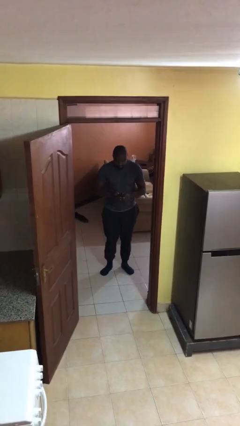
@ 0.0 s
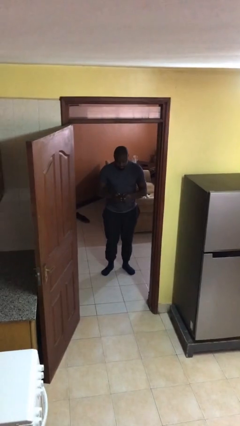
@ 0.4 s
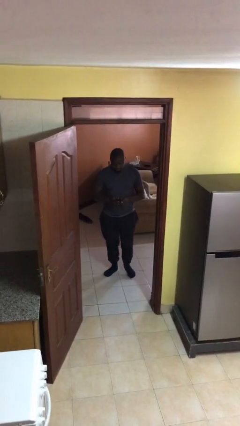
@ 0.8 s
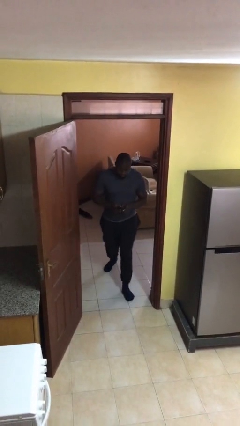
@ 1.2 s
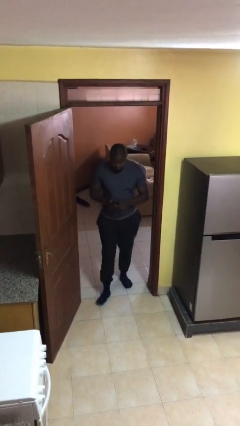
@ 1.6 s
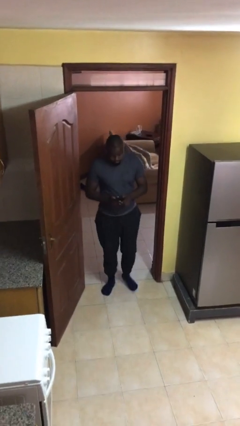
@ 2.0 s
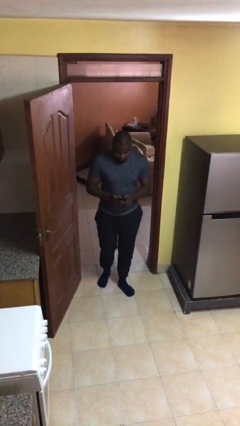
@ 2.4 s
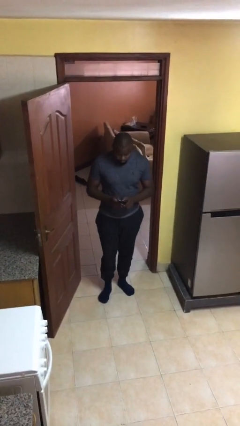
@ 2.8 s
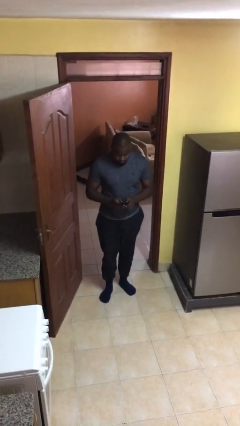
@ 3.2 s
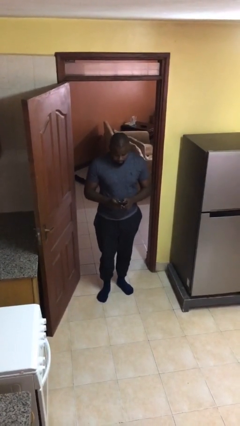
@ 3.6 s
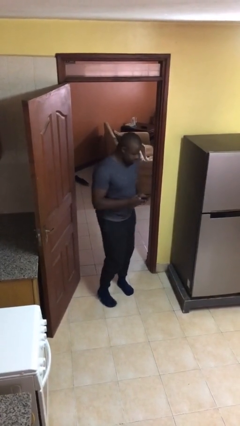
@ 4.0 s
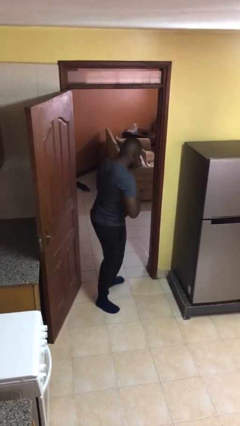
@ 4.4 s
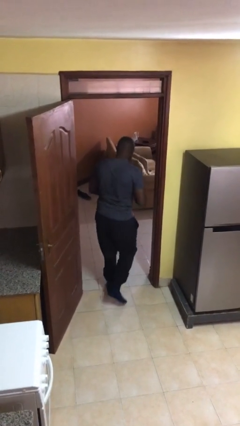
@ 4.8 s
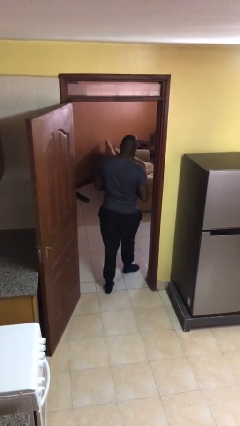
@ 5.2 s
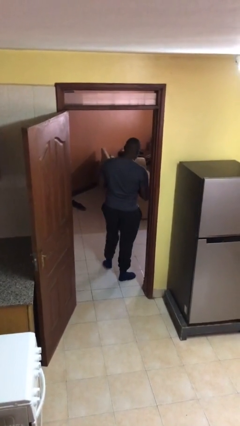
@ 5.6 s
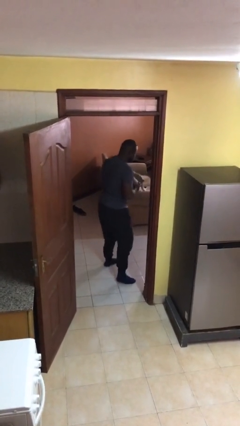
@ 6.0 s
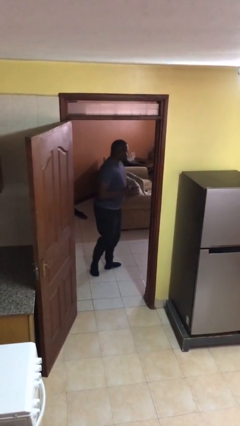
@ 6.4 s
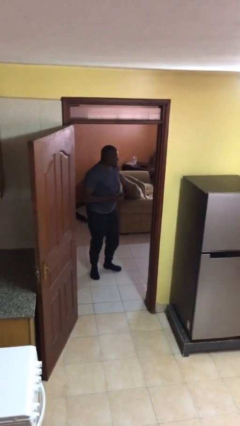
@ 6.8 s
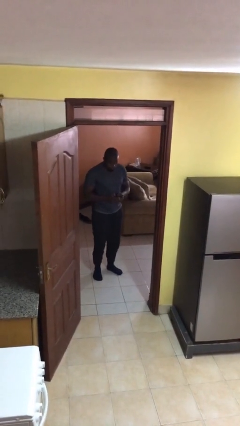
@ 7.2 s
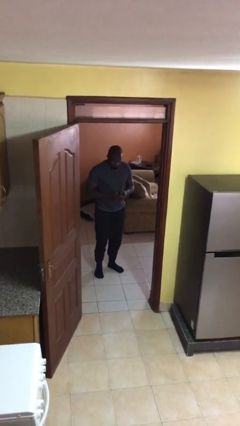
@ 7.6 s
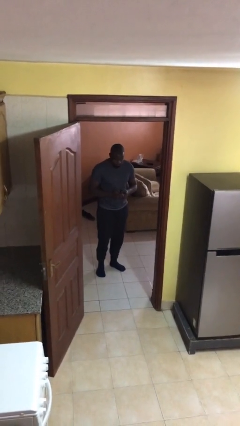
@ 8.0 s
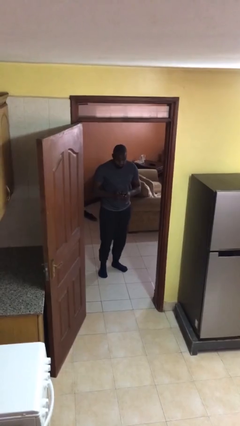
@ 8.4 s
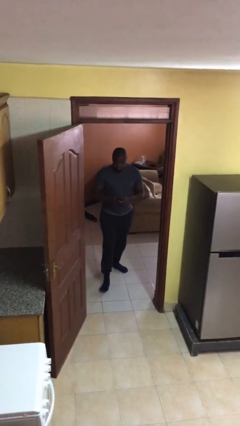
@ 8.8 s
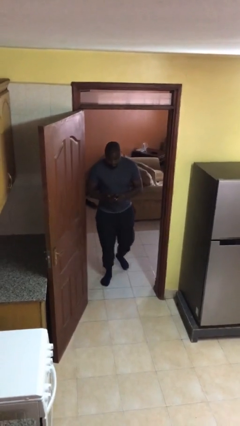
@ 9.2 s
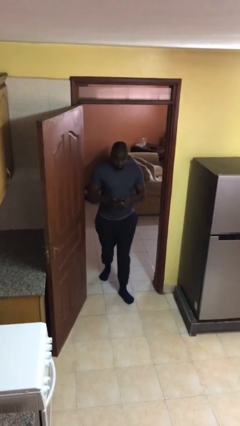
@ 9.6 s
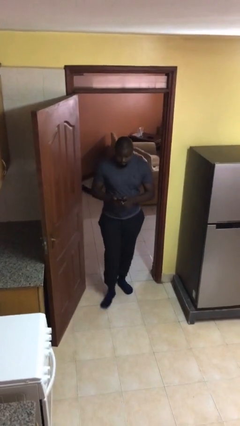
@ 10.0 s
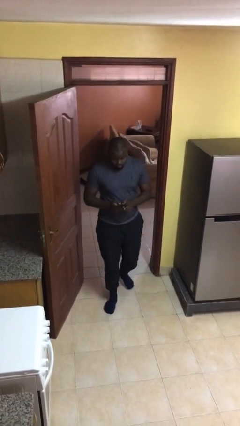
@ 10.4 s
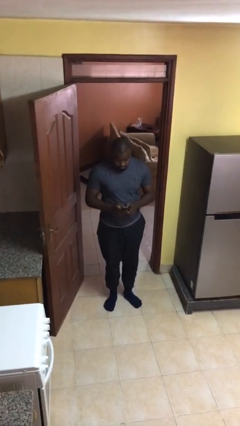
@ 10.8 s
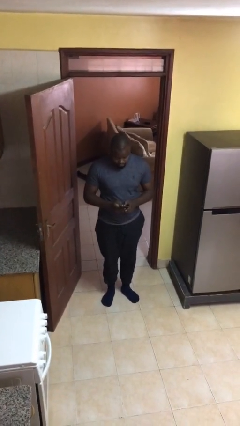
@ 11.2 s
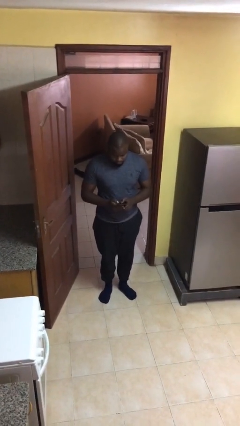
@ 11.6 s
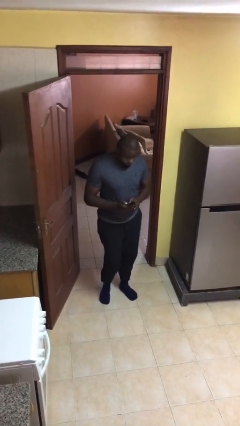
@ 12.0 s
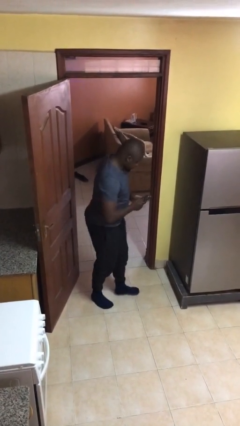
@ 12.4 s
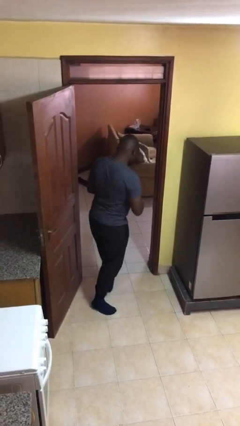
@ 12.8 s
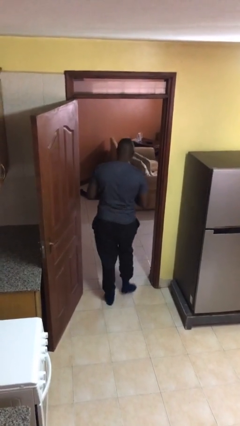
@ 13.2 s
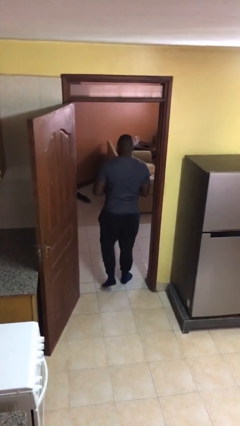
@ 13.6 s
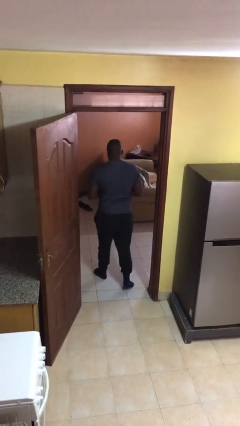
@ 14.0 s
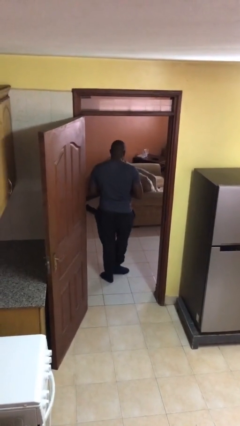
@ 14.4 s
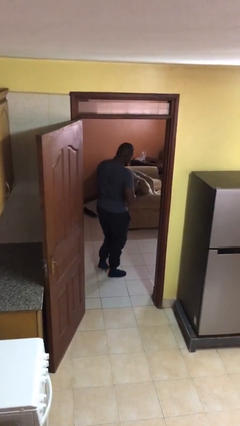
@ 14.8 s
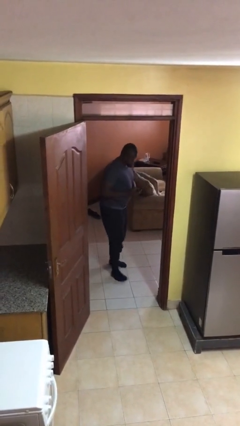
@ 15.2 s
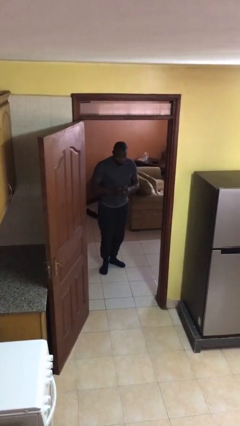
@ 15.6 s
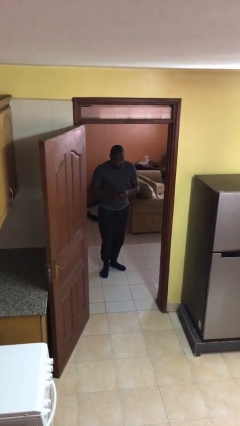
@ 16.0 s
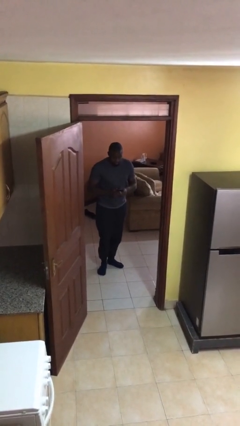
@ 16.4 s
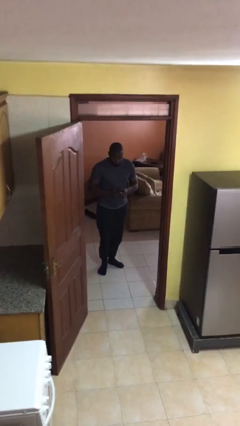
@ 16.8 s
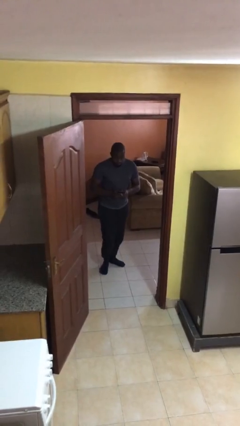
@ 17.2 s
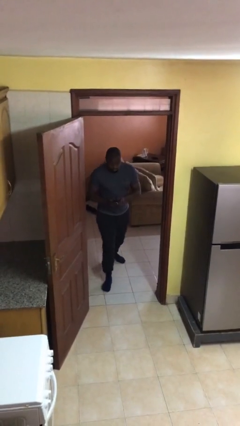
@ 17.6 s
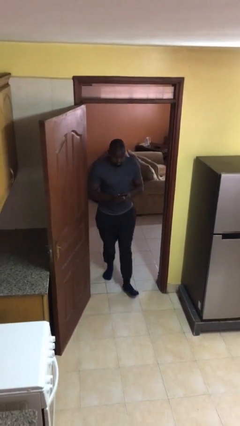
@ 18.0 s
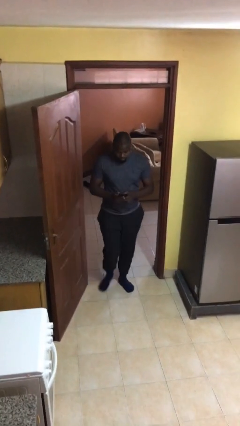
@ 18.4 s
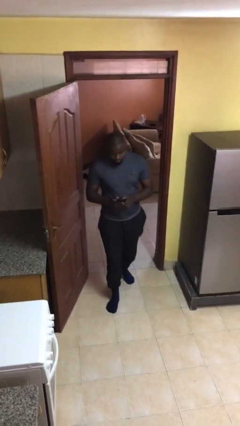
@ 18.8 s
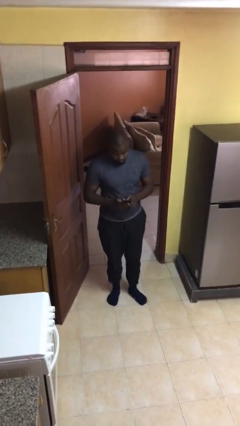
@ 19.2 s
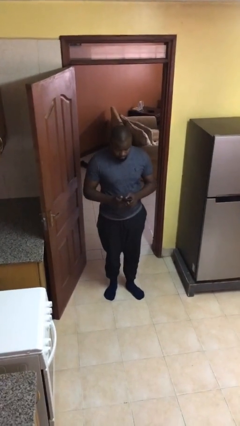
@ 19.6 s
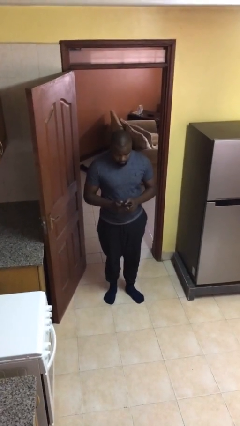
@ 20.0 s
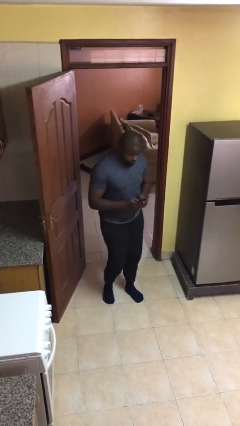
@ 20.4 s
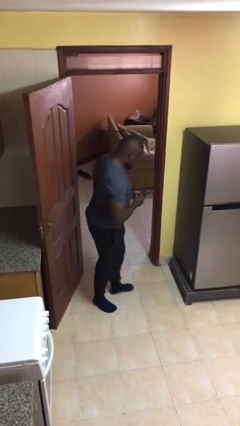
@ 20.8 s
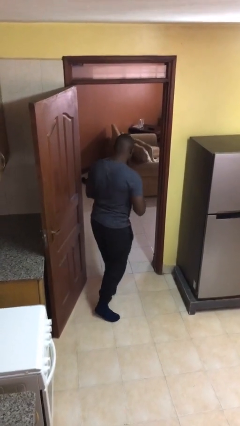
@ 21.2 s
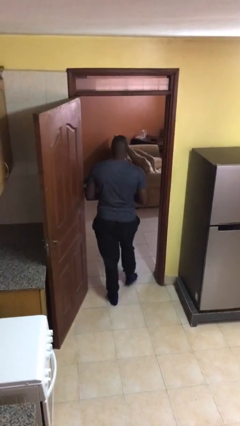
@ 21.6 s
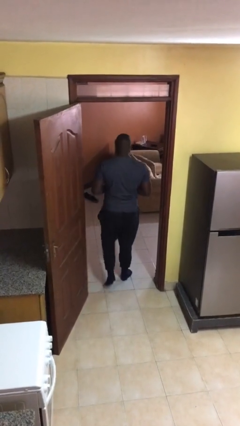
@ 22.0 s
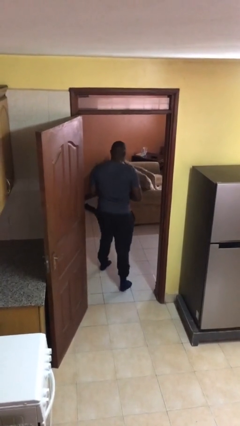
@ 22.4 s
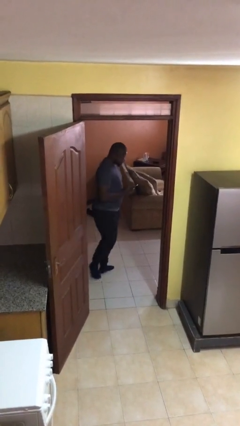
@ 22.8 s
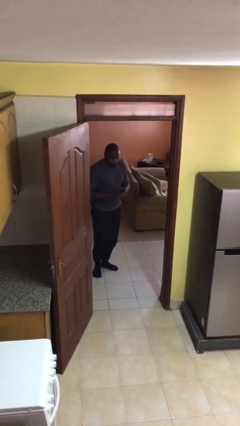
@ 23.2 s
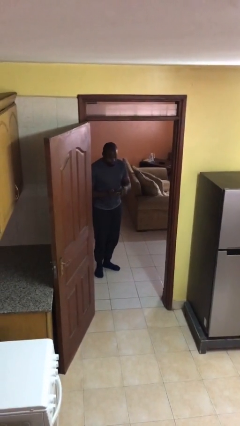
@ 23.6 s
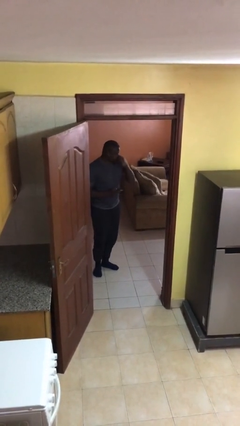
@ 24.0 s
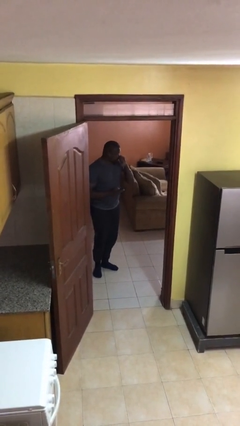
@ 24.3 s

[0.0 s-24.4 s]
person texts on phone

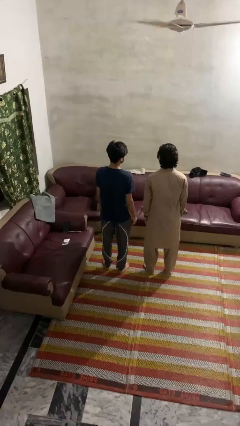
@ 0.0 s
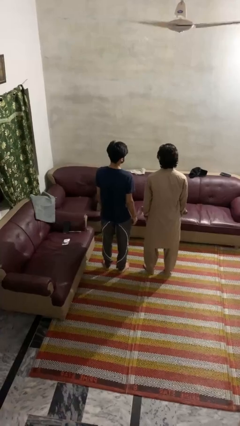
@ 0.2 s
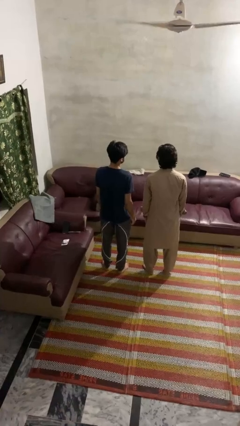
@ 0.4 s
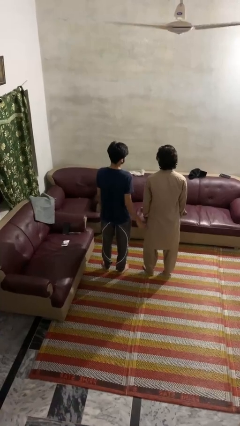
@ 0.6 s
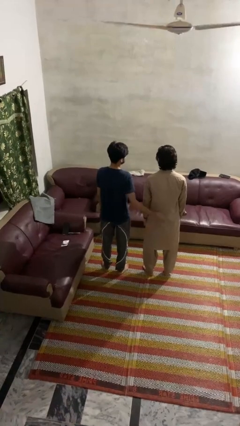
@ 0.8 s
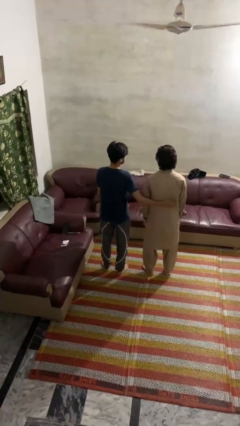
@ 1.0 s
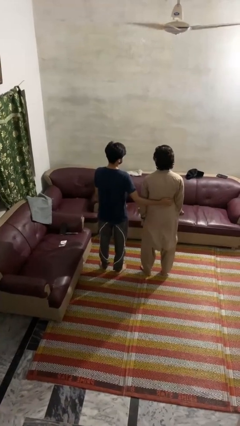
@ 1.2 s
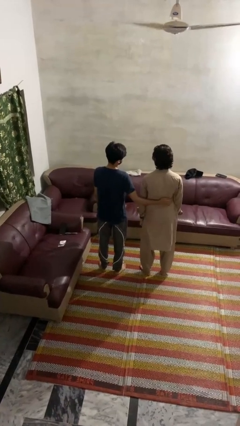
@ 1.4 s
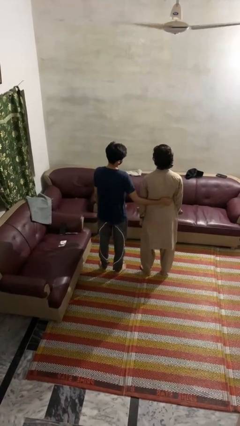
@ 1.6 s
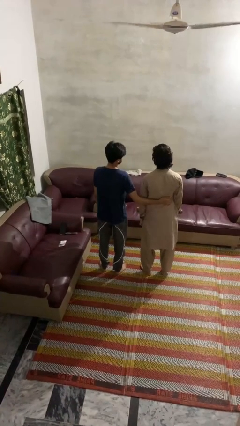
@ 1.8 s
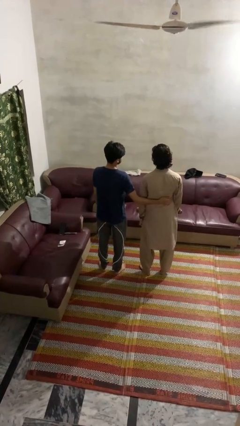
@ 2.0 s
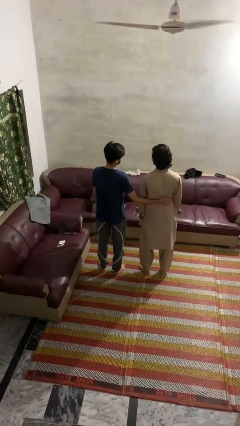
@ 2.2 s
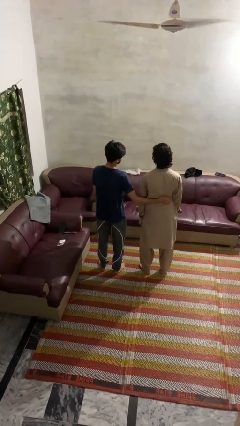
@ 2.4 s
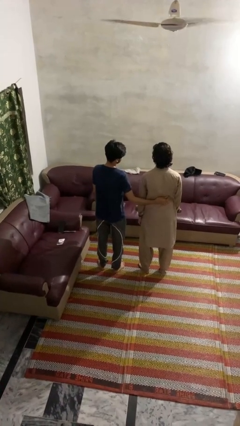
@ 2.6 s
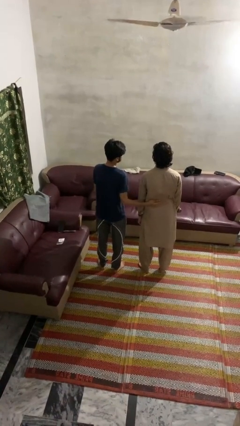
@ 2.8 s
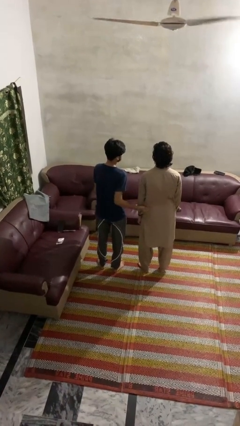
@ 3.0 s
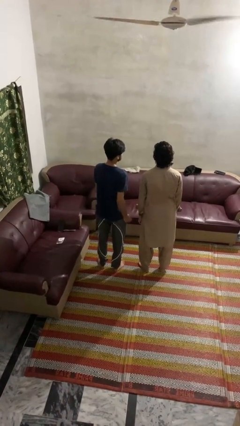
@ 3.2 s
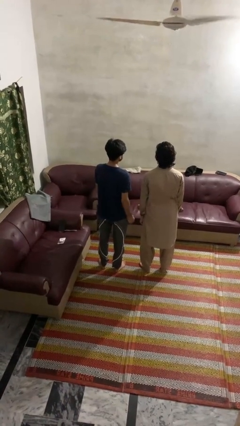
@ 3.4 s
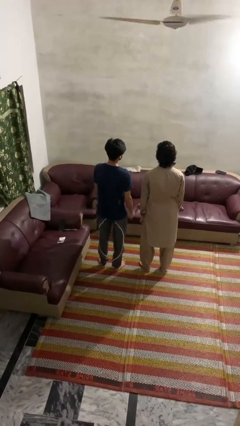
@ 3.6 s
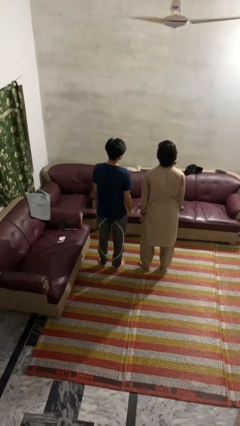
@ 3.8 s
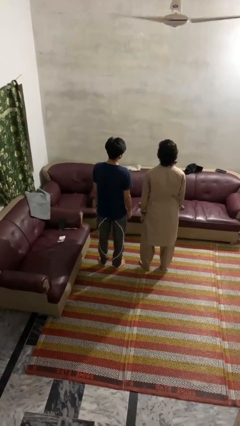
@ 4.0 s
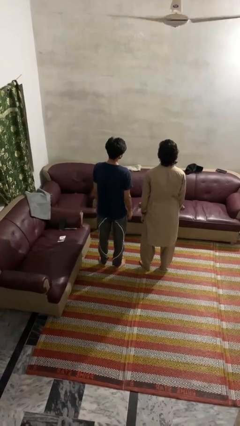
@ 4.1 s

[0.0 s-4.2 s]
person touches back of person

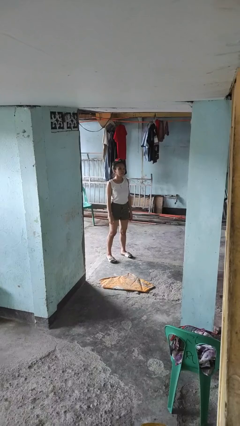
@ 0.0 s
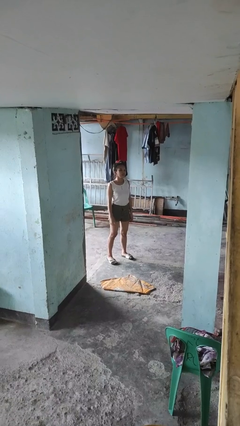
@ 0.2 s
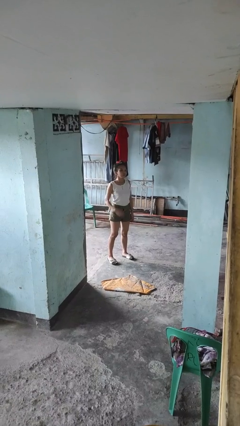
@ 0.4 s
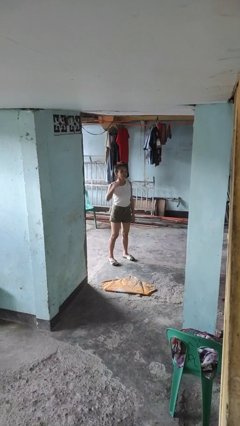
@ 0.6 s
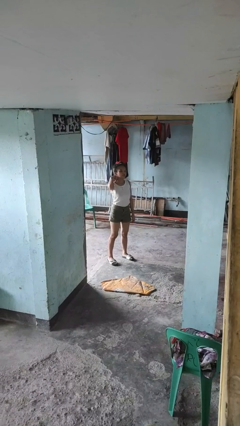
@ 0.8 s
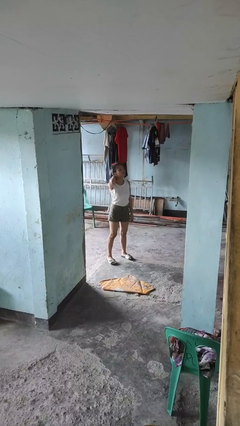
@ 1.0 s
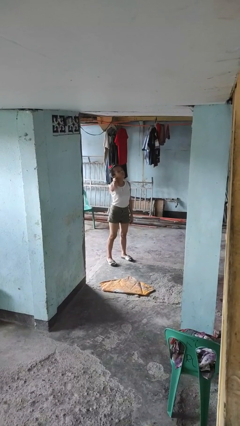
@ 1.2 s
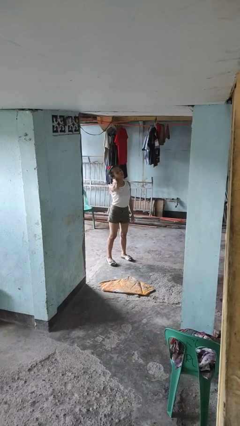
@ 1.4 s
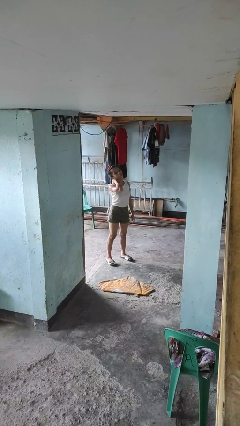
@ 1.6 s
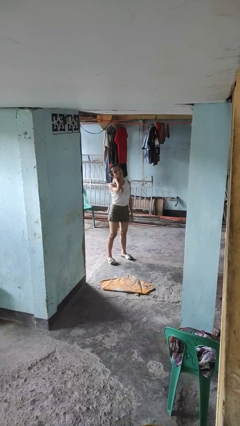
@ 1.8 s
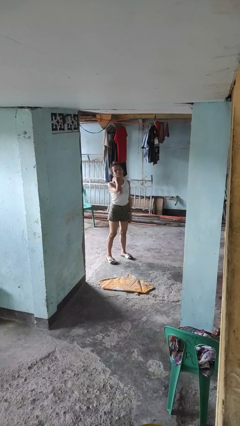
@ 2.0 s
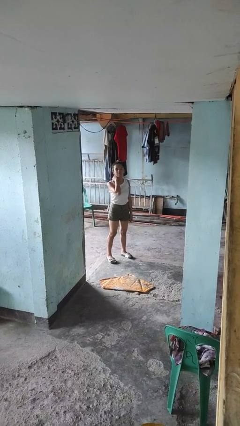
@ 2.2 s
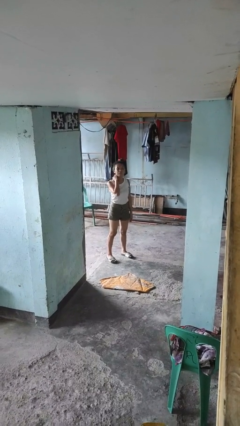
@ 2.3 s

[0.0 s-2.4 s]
person rubs neck
